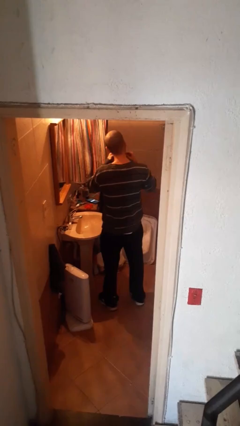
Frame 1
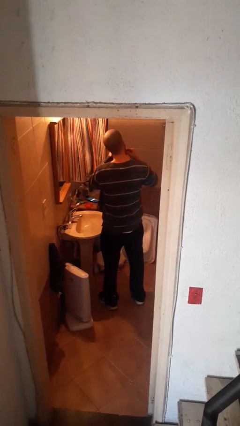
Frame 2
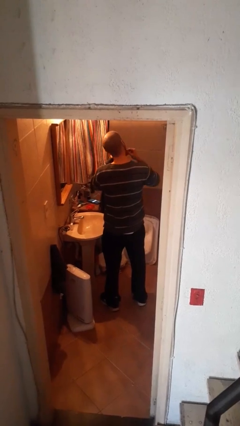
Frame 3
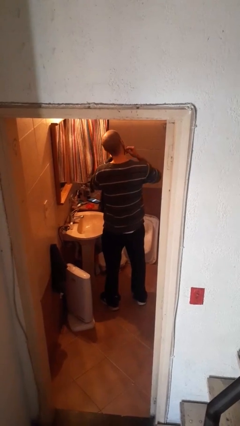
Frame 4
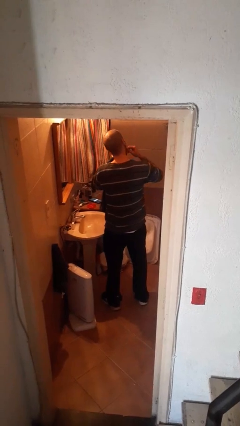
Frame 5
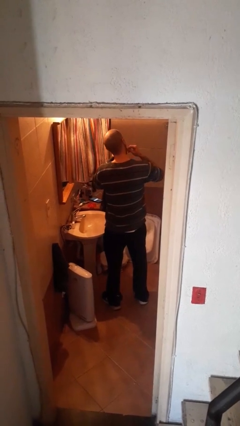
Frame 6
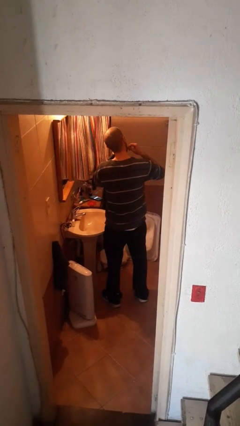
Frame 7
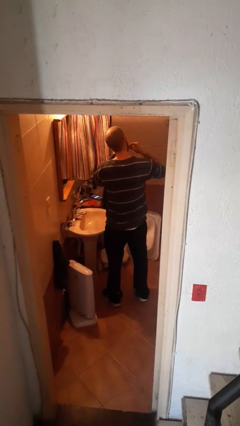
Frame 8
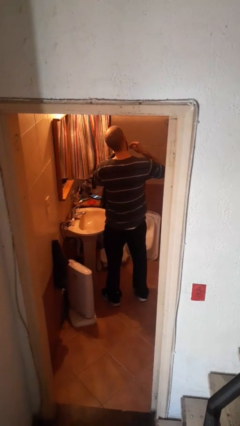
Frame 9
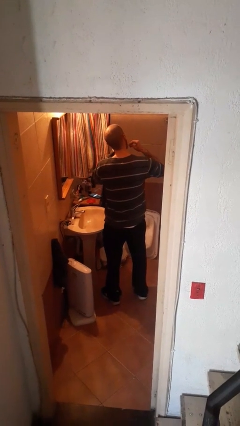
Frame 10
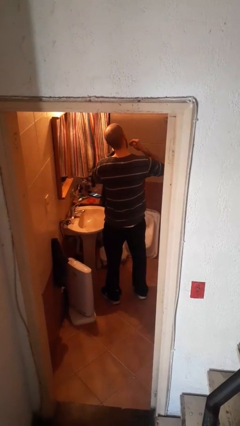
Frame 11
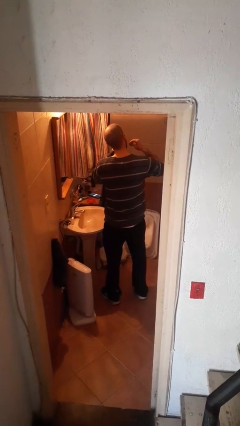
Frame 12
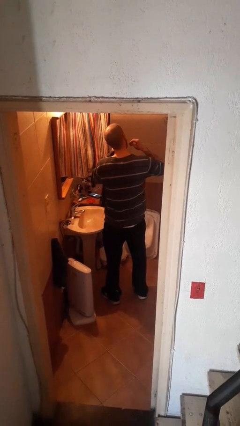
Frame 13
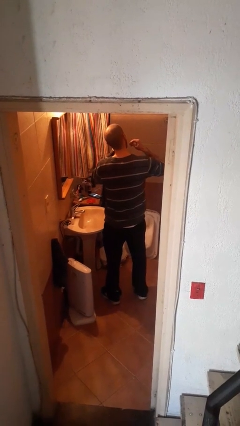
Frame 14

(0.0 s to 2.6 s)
person flosses

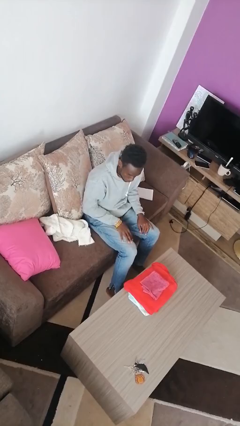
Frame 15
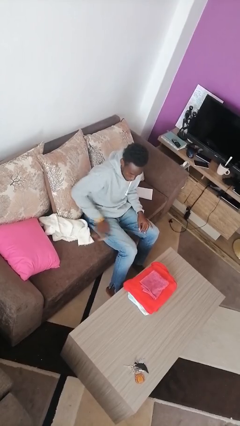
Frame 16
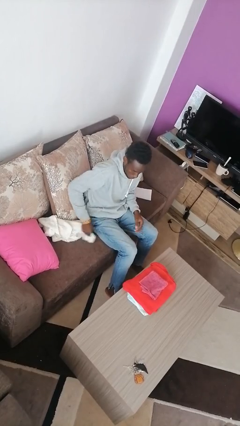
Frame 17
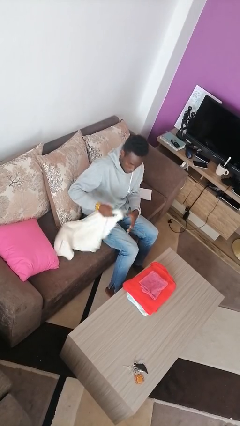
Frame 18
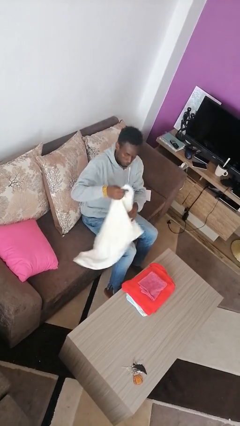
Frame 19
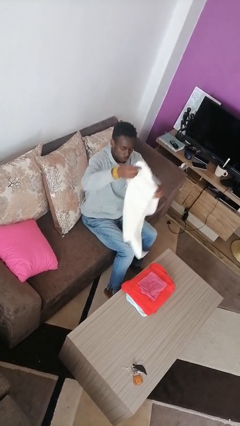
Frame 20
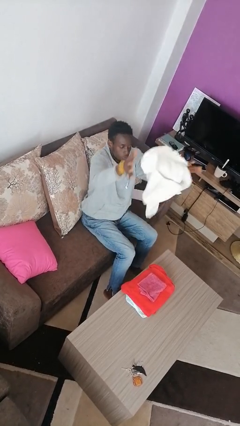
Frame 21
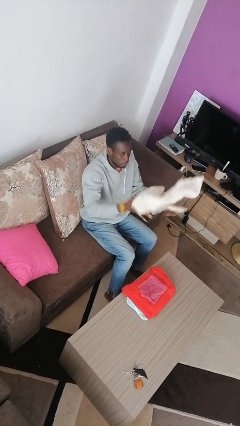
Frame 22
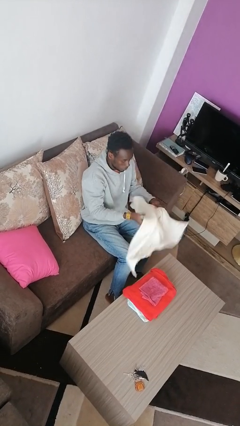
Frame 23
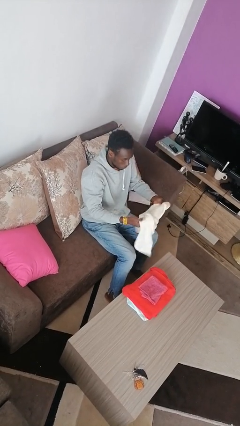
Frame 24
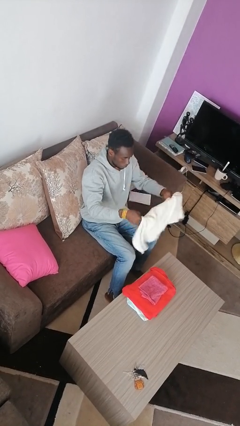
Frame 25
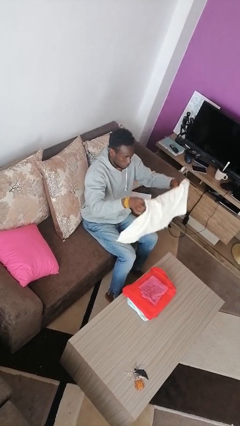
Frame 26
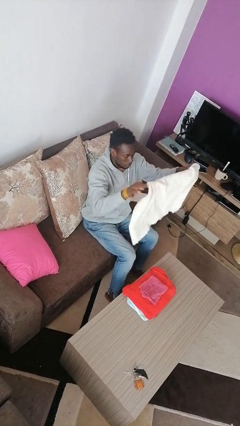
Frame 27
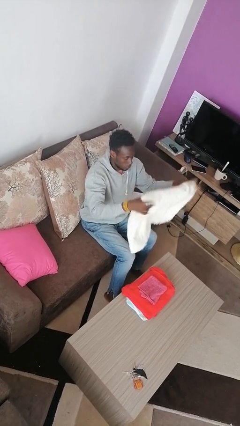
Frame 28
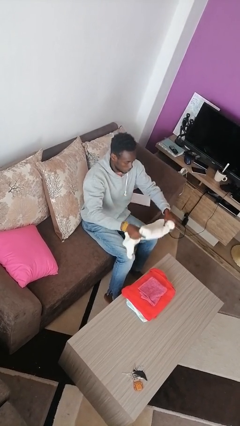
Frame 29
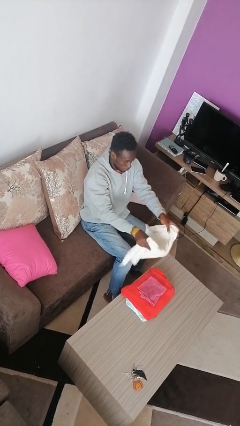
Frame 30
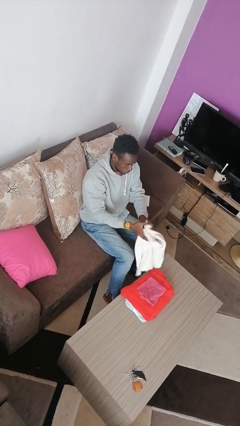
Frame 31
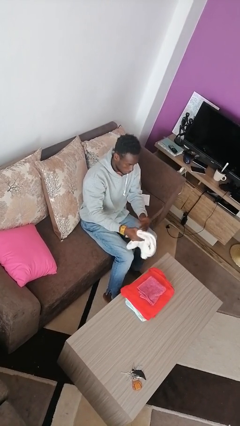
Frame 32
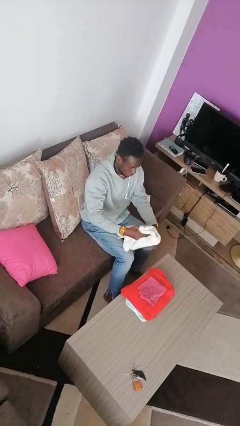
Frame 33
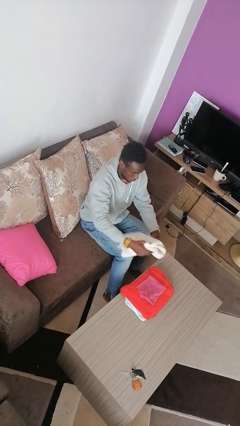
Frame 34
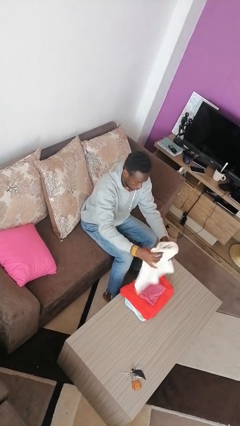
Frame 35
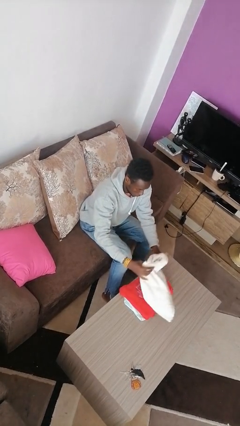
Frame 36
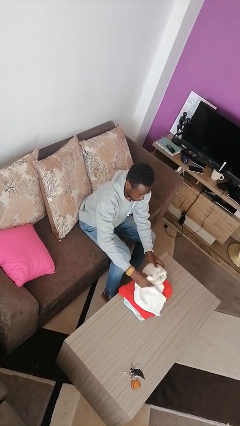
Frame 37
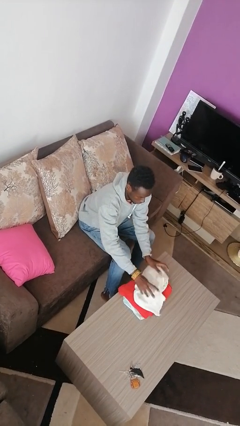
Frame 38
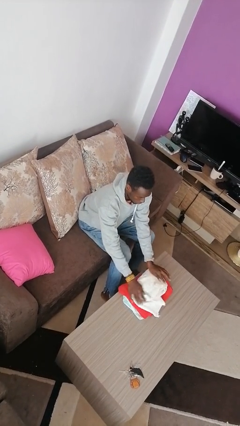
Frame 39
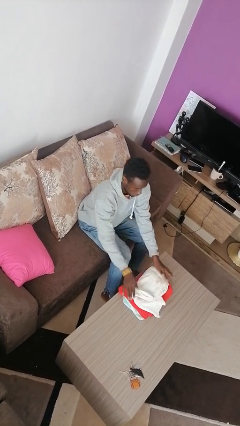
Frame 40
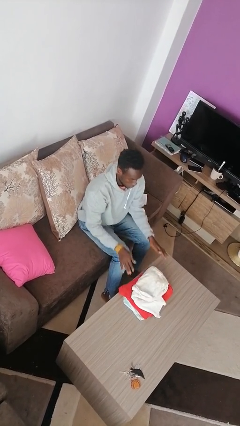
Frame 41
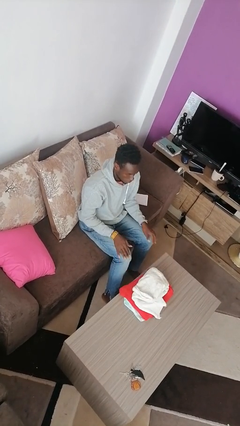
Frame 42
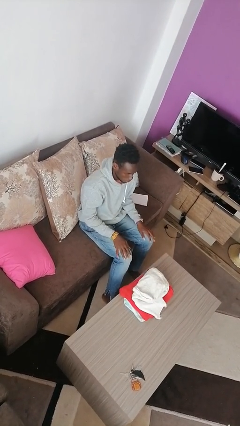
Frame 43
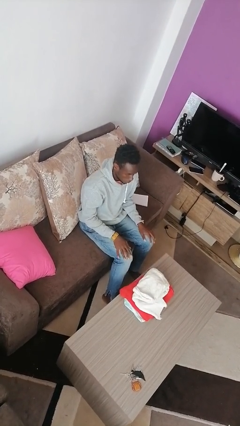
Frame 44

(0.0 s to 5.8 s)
person folds towel

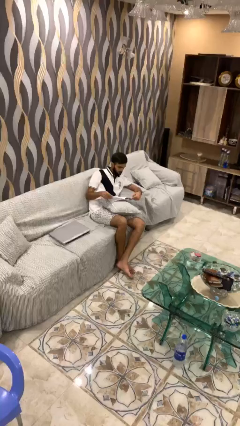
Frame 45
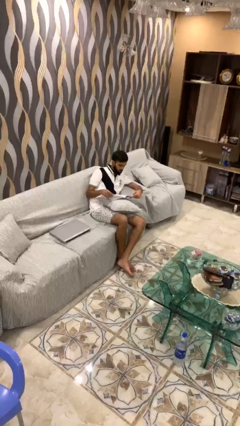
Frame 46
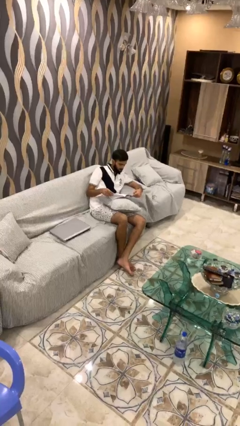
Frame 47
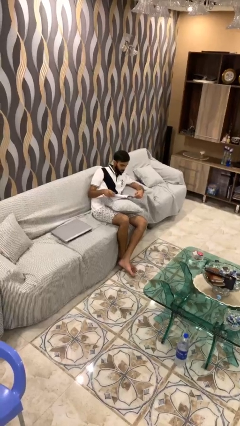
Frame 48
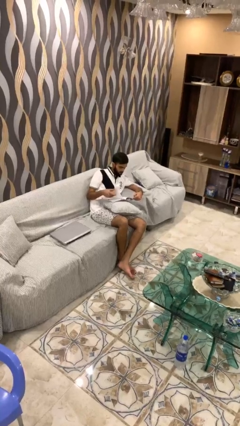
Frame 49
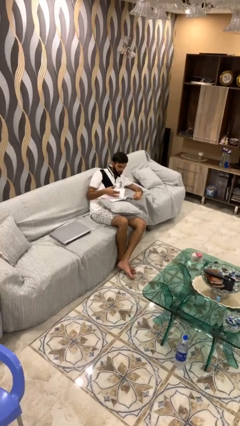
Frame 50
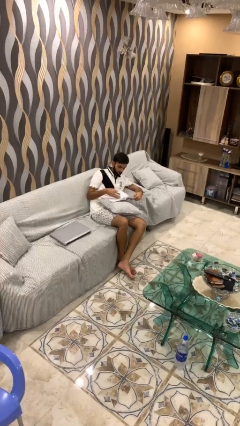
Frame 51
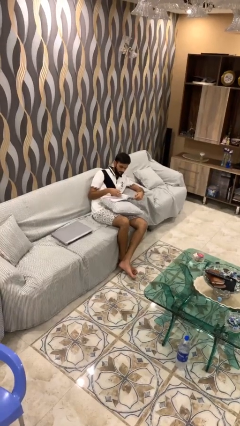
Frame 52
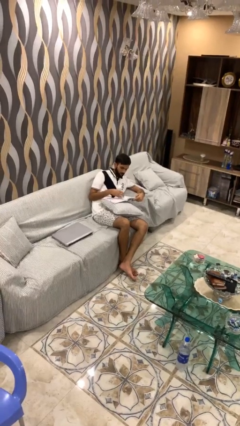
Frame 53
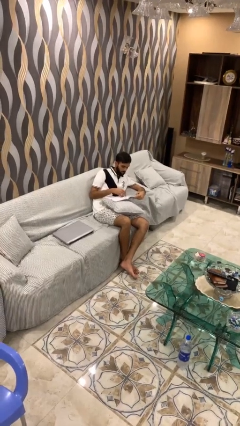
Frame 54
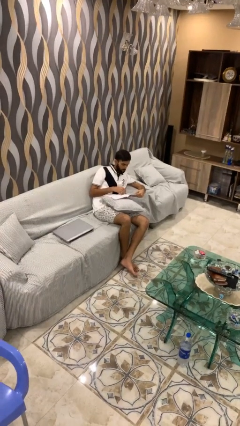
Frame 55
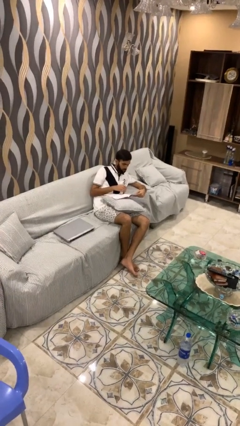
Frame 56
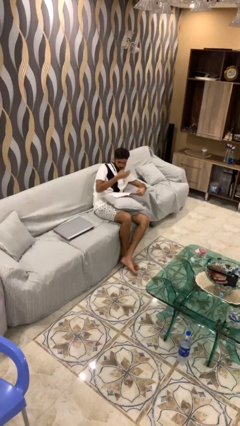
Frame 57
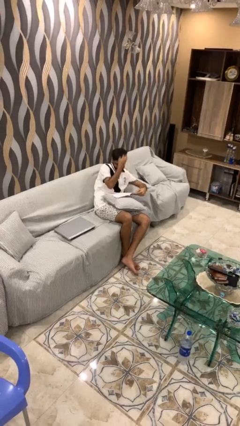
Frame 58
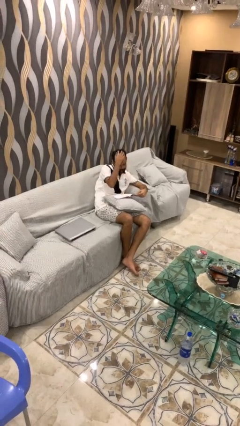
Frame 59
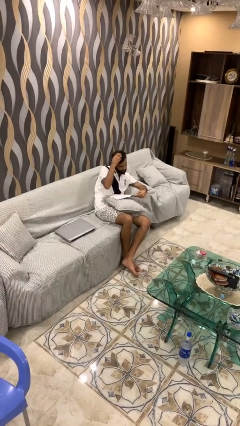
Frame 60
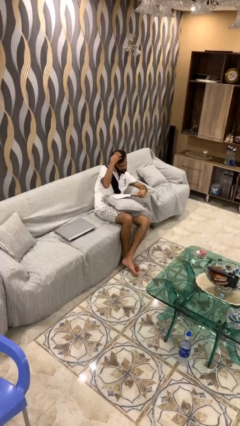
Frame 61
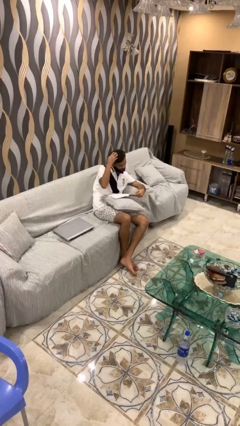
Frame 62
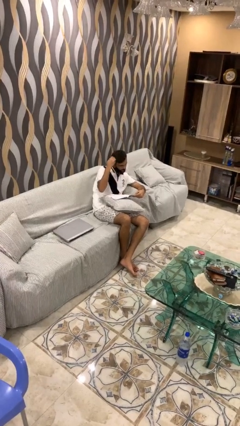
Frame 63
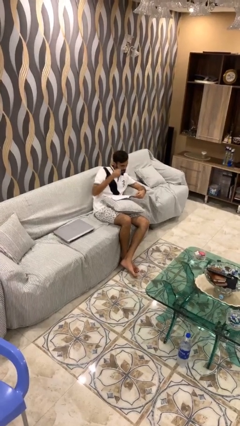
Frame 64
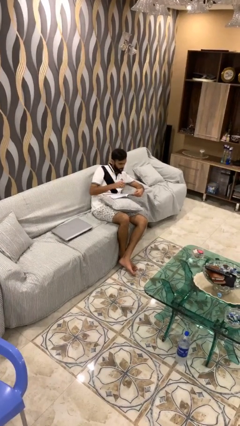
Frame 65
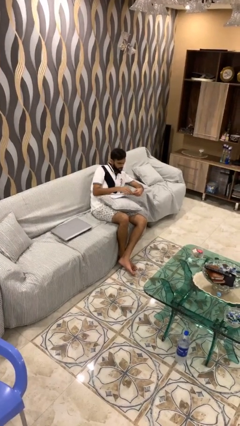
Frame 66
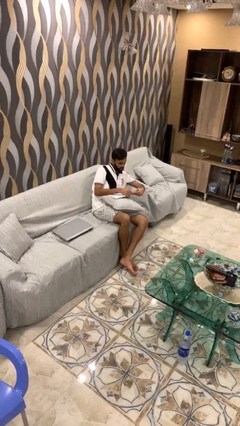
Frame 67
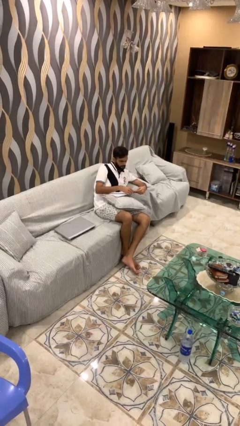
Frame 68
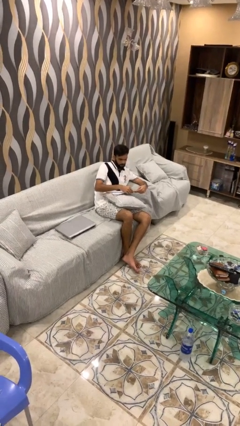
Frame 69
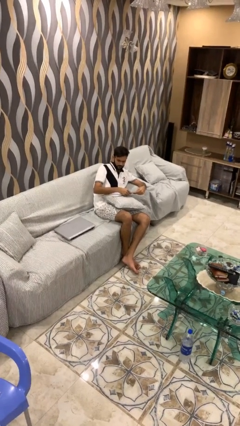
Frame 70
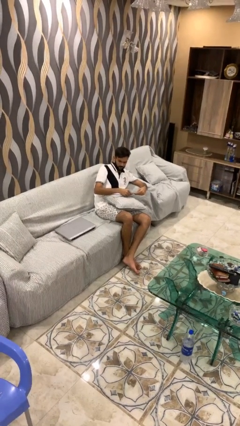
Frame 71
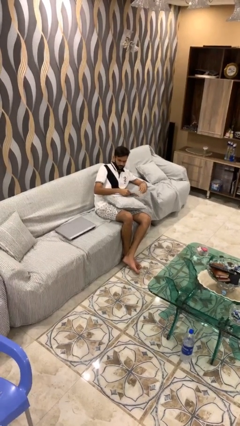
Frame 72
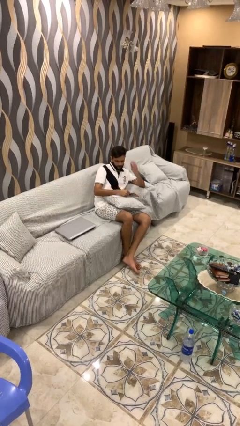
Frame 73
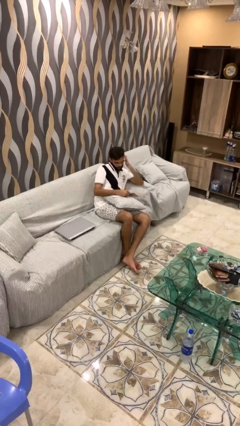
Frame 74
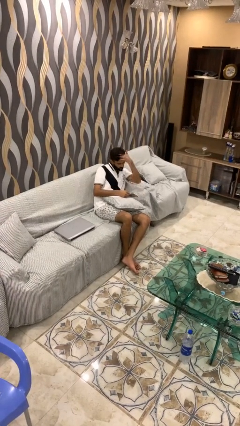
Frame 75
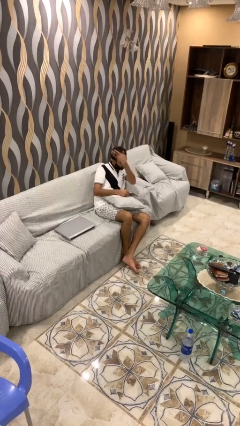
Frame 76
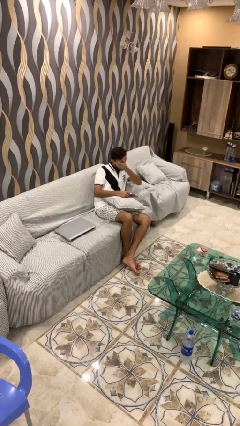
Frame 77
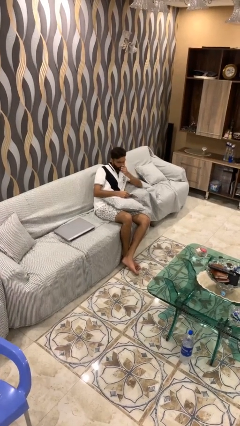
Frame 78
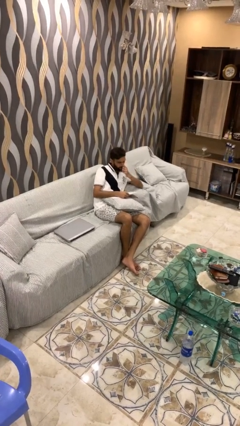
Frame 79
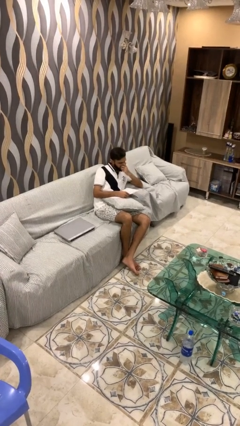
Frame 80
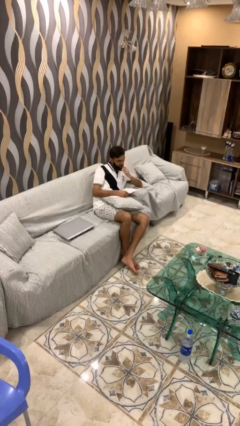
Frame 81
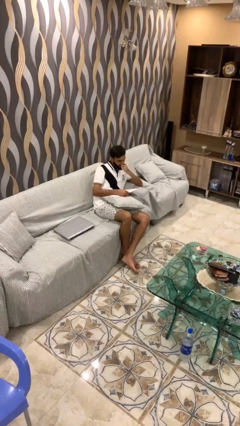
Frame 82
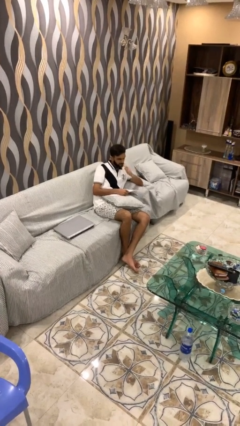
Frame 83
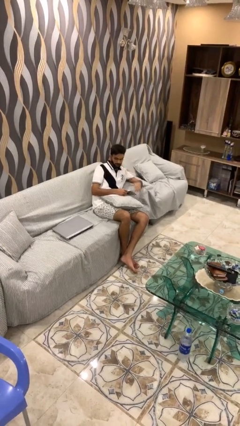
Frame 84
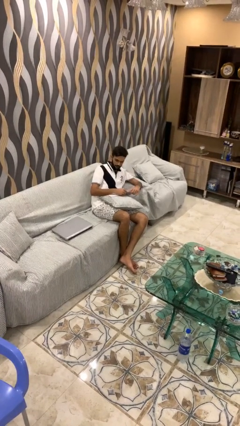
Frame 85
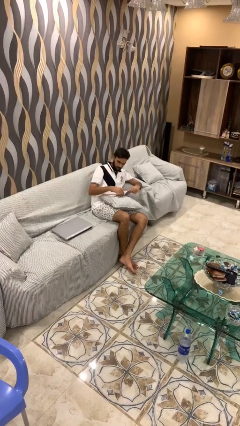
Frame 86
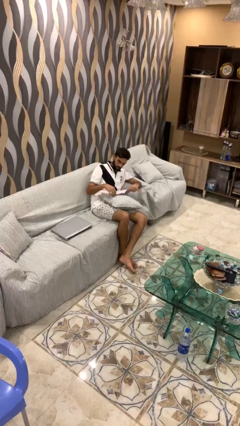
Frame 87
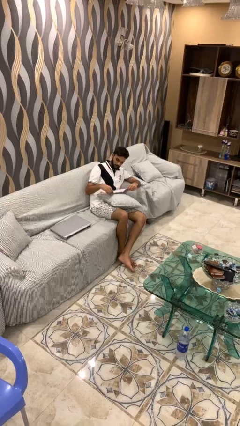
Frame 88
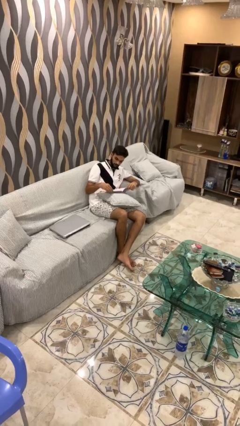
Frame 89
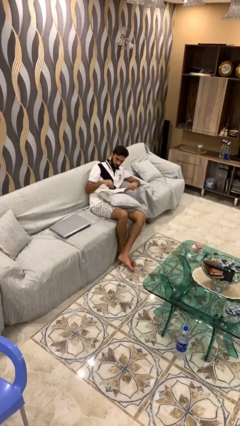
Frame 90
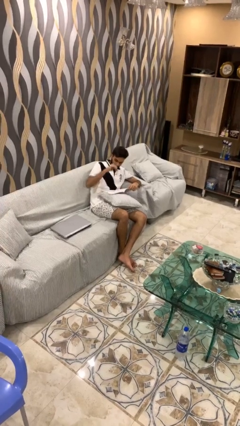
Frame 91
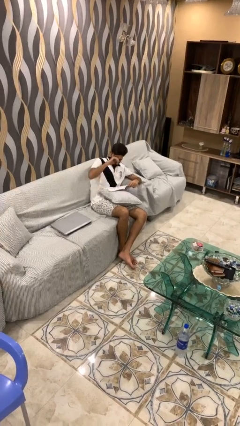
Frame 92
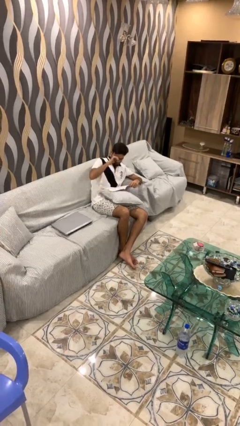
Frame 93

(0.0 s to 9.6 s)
person reads document
